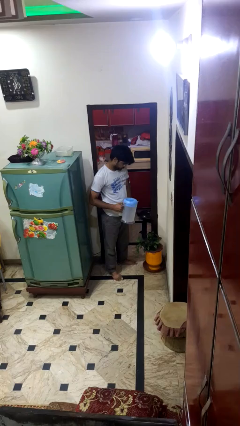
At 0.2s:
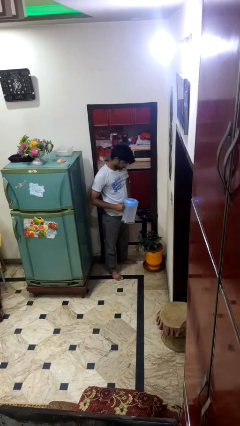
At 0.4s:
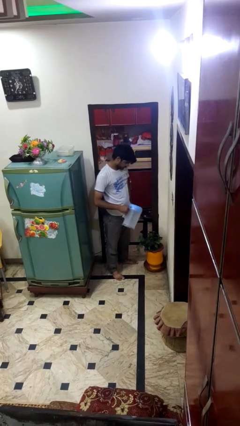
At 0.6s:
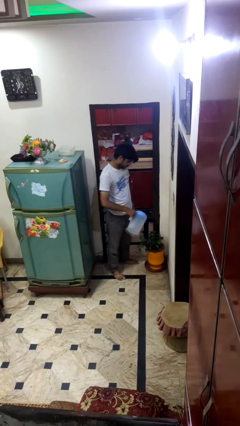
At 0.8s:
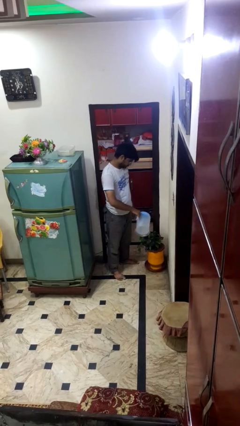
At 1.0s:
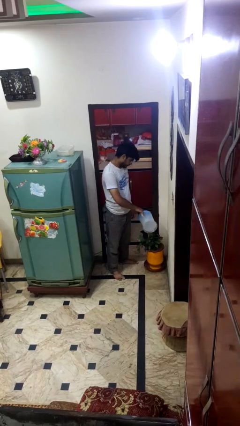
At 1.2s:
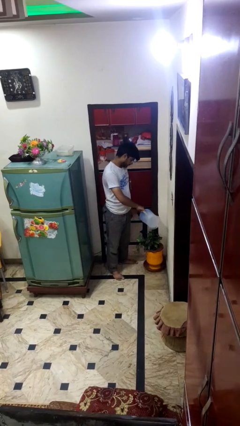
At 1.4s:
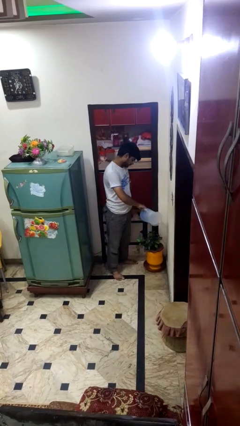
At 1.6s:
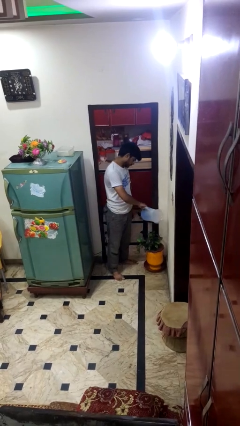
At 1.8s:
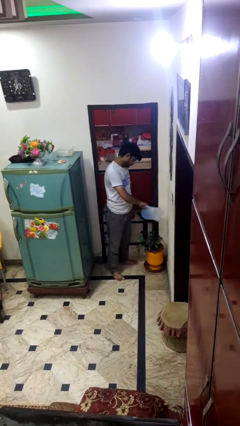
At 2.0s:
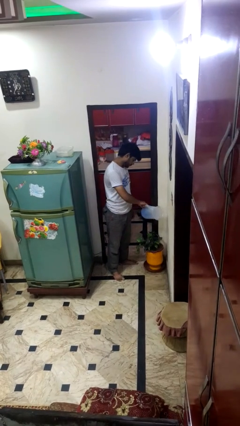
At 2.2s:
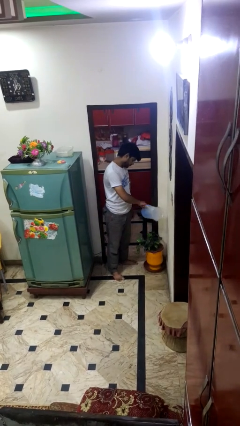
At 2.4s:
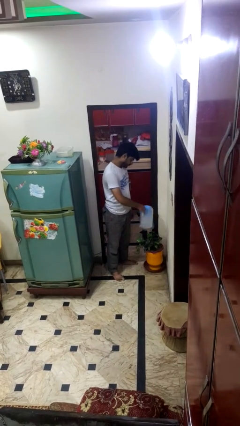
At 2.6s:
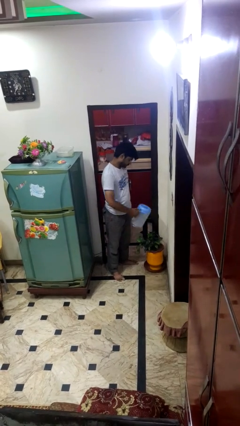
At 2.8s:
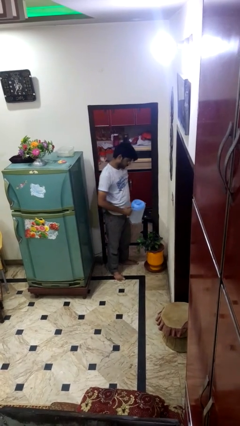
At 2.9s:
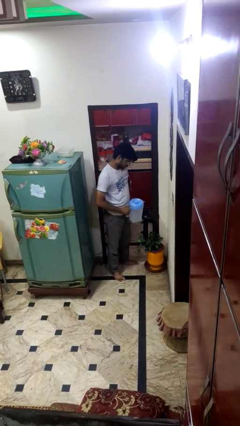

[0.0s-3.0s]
person waters houseplant

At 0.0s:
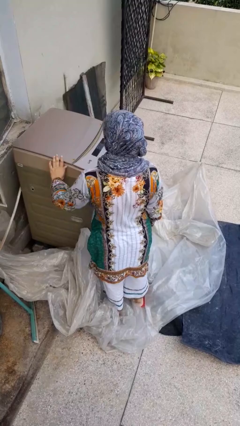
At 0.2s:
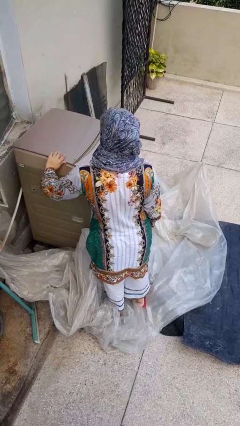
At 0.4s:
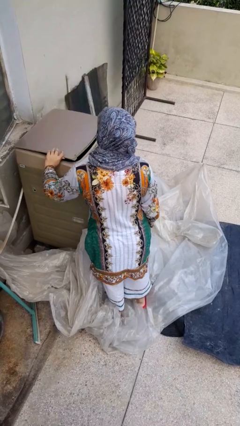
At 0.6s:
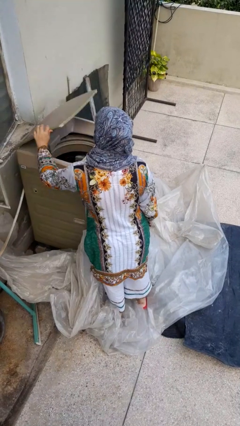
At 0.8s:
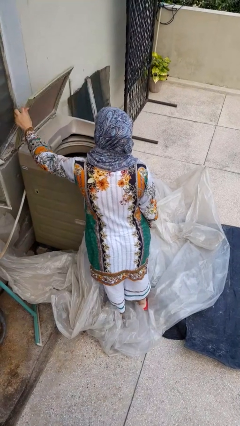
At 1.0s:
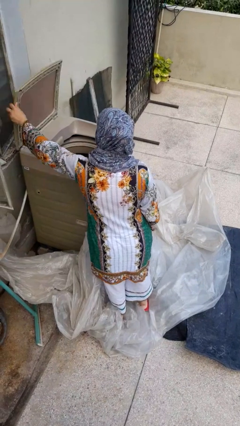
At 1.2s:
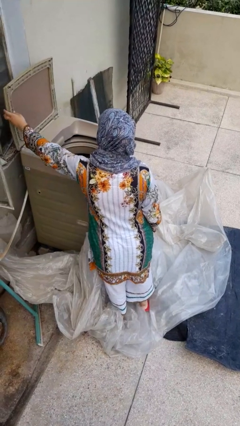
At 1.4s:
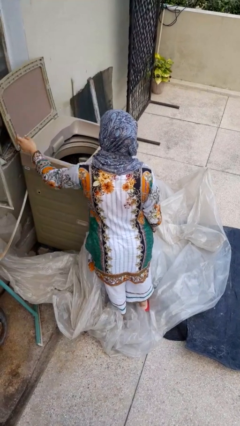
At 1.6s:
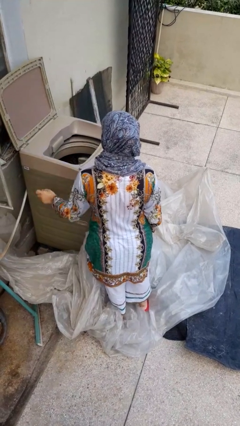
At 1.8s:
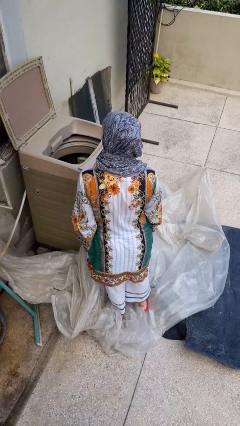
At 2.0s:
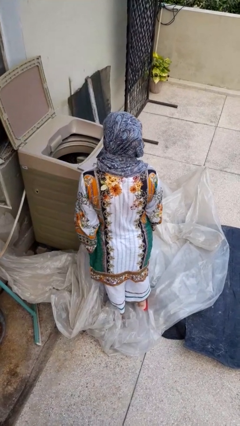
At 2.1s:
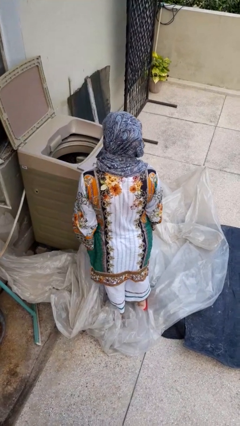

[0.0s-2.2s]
person opens clothes washer

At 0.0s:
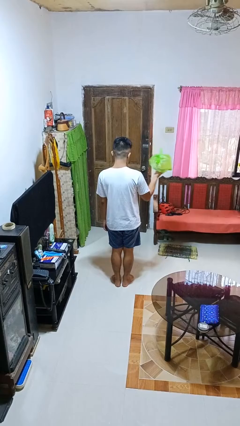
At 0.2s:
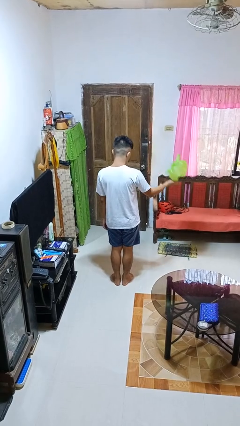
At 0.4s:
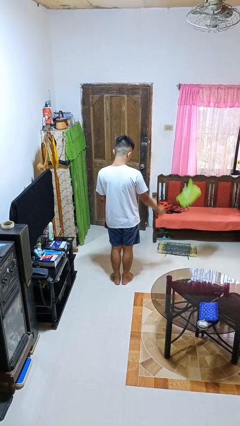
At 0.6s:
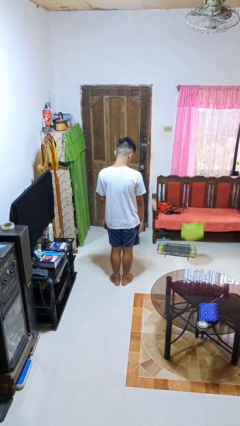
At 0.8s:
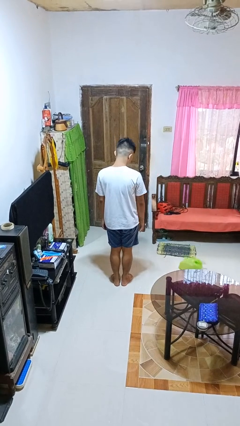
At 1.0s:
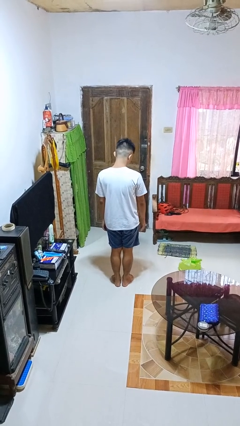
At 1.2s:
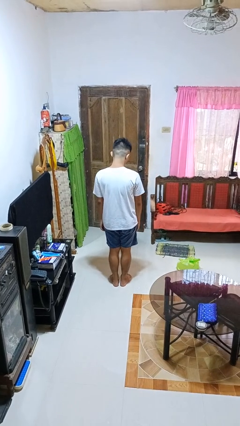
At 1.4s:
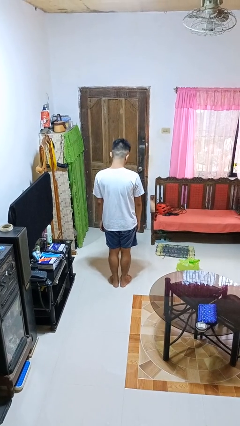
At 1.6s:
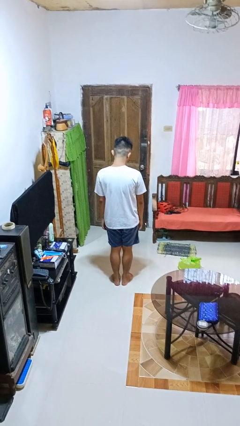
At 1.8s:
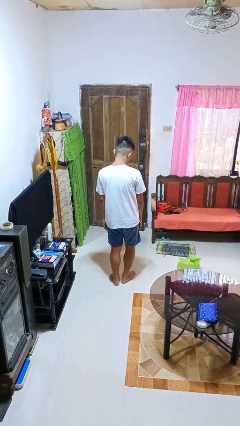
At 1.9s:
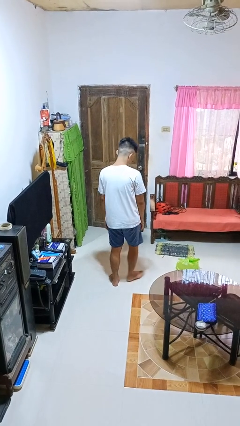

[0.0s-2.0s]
person throws object to ground

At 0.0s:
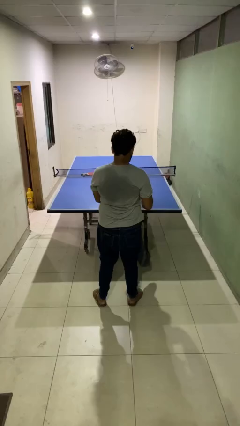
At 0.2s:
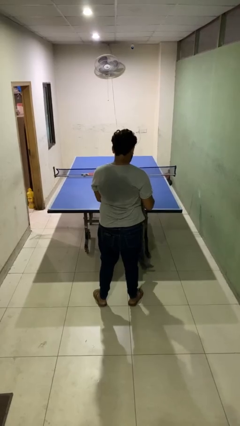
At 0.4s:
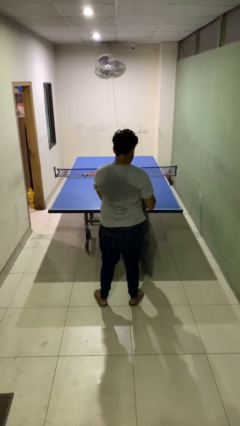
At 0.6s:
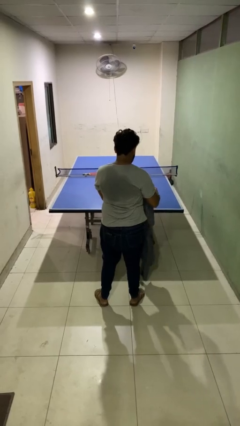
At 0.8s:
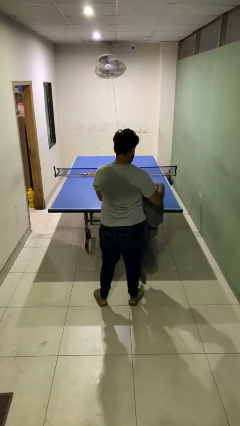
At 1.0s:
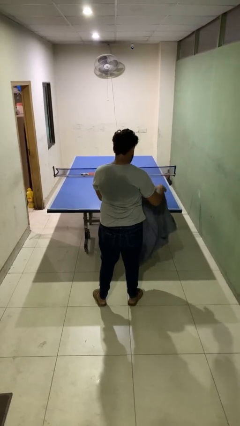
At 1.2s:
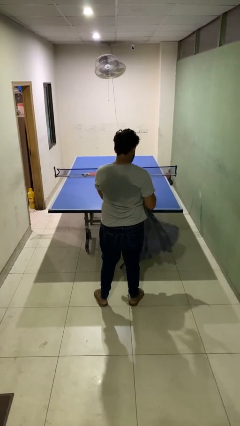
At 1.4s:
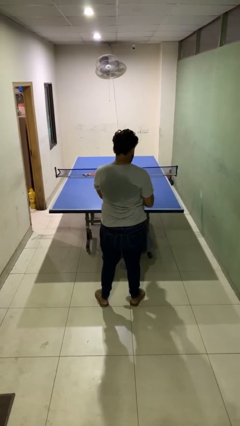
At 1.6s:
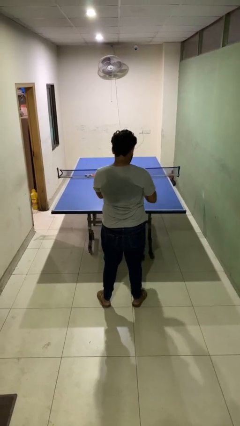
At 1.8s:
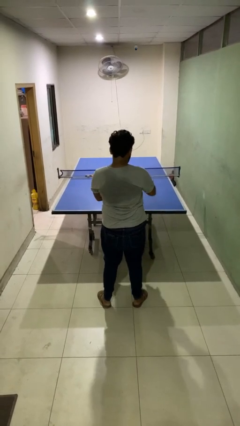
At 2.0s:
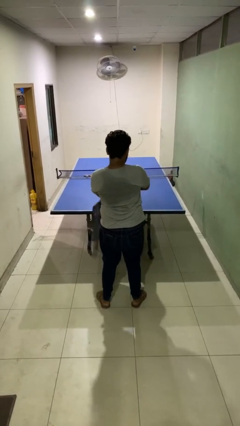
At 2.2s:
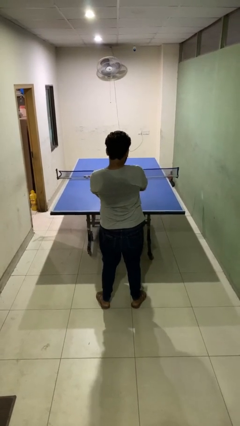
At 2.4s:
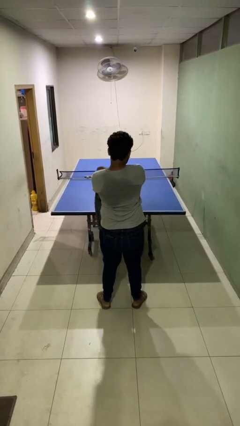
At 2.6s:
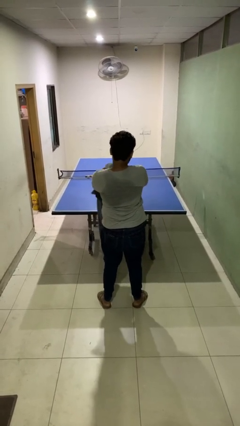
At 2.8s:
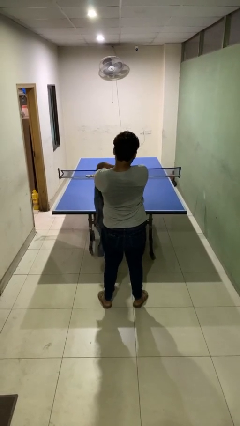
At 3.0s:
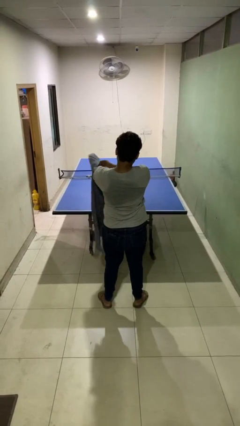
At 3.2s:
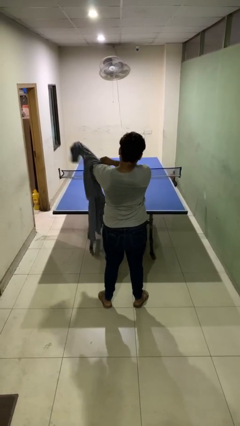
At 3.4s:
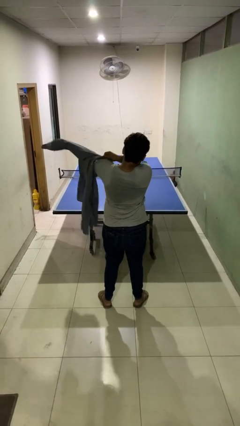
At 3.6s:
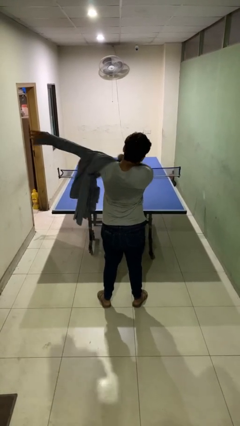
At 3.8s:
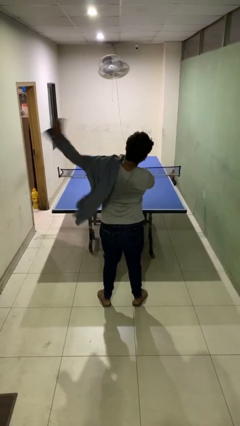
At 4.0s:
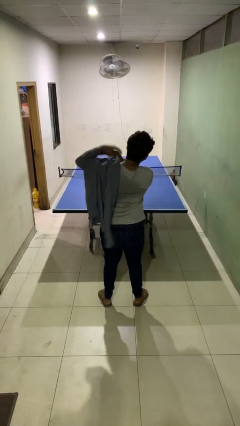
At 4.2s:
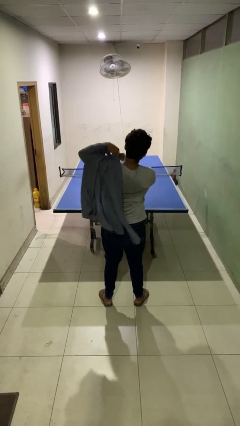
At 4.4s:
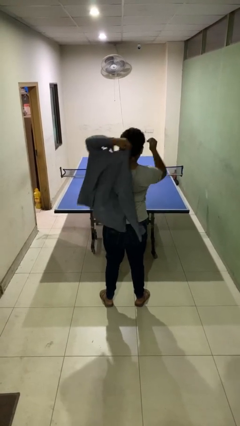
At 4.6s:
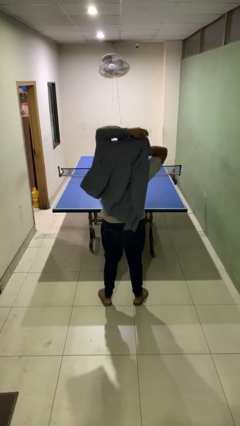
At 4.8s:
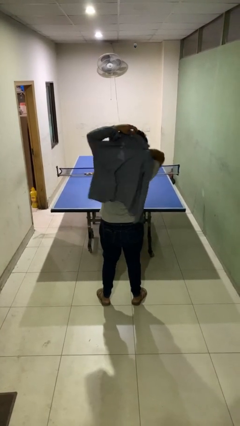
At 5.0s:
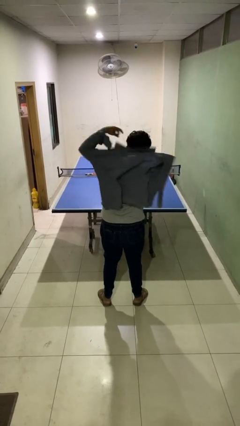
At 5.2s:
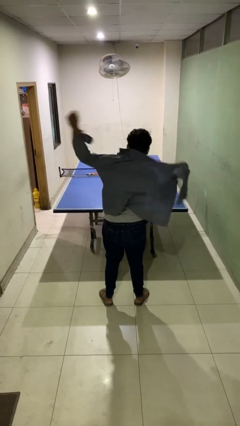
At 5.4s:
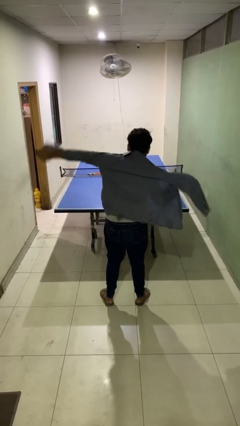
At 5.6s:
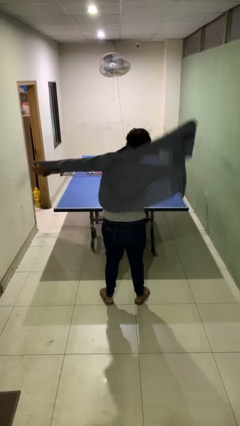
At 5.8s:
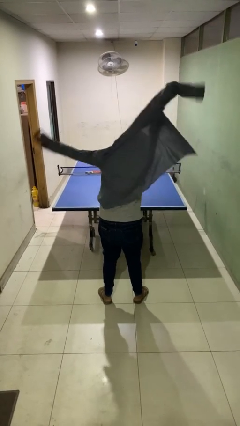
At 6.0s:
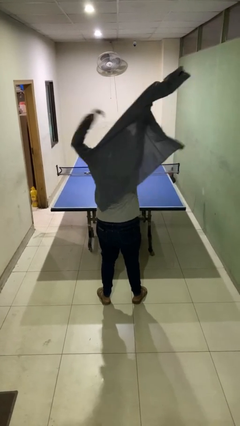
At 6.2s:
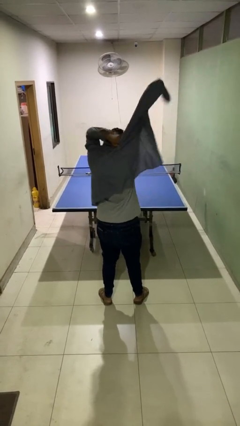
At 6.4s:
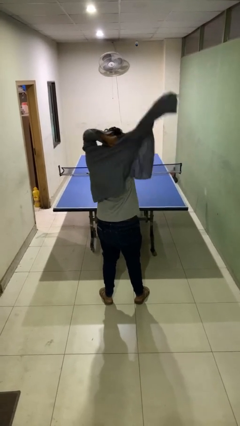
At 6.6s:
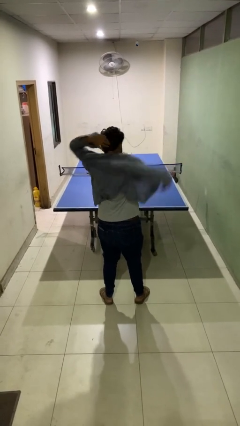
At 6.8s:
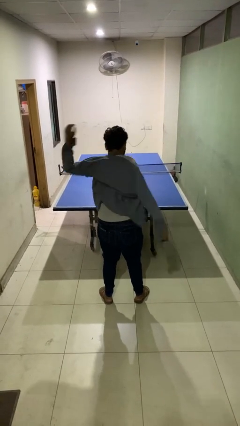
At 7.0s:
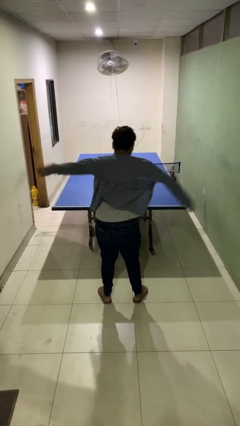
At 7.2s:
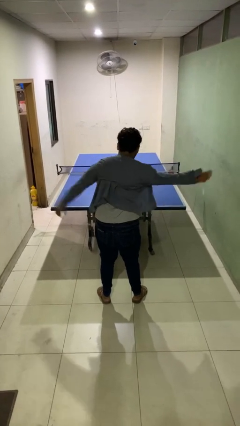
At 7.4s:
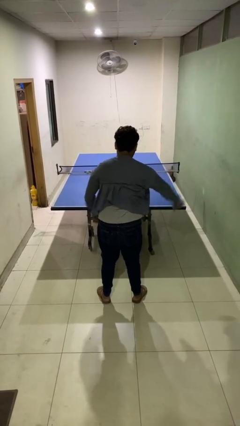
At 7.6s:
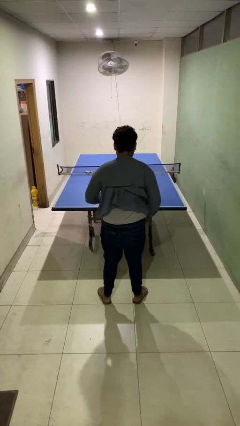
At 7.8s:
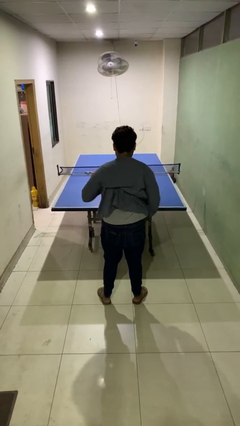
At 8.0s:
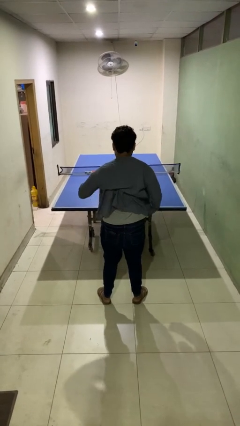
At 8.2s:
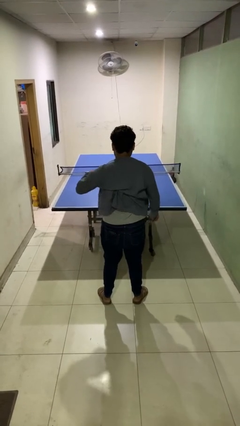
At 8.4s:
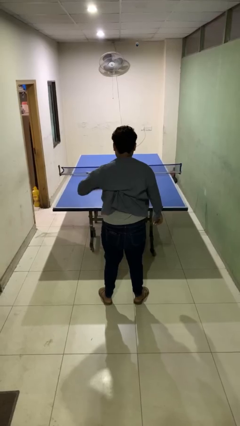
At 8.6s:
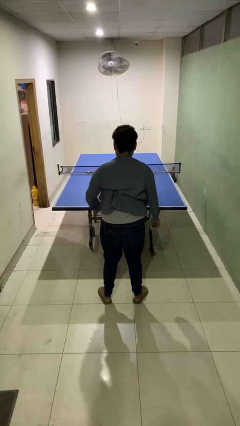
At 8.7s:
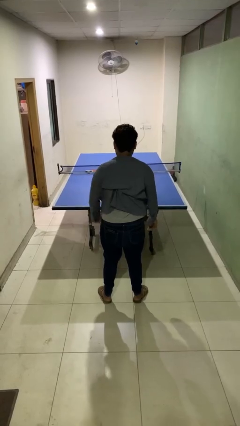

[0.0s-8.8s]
person puts on shirt

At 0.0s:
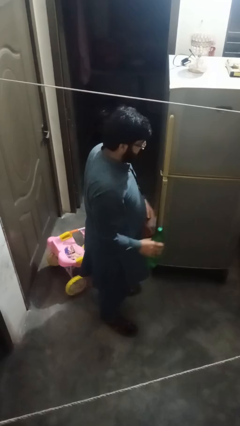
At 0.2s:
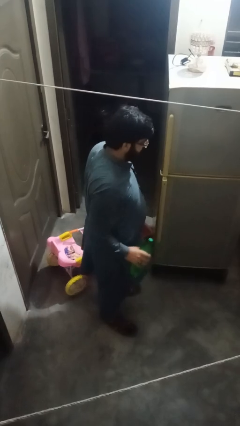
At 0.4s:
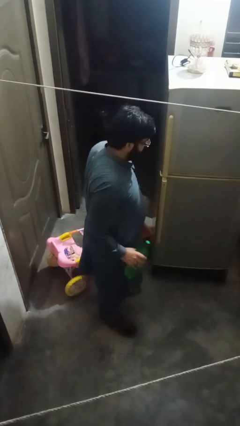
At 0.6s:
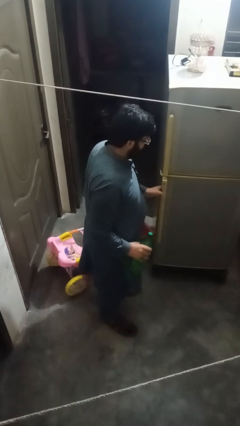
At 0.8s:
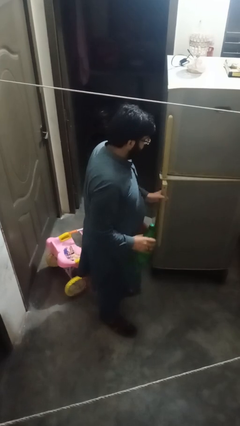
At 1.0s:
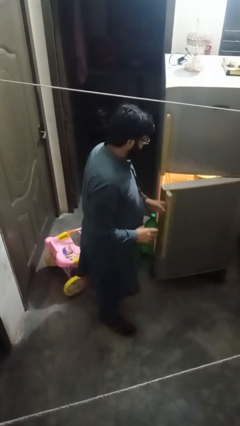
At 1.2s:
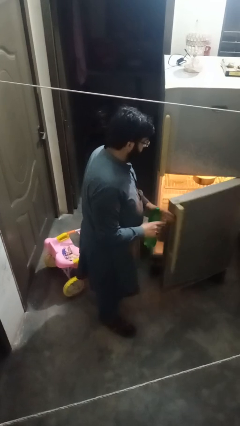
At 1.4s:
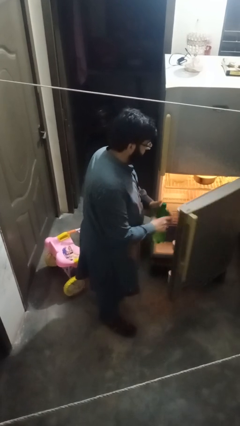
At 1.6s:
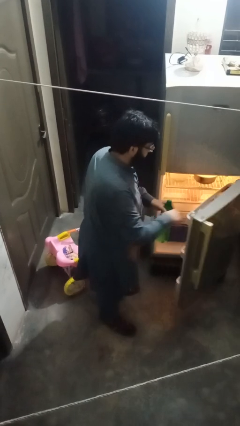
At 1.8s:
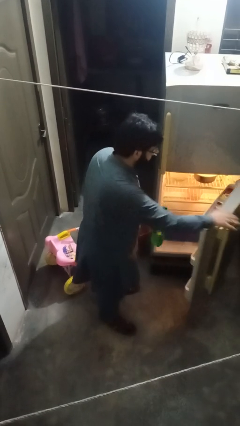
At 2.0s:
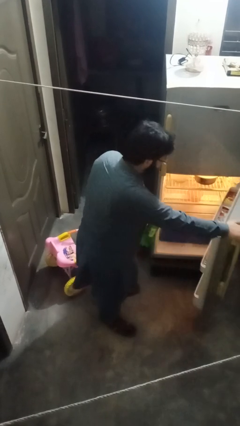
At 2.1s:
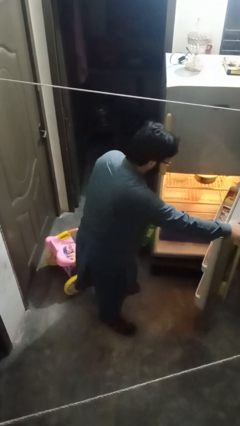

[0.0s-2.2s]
person opens refrigerator
